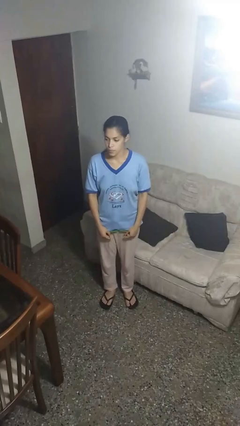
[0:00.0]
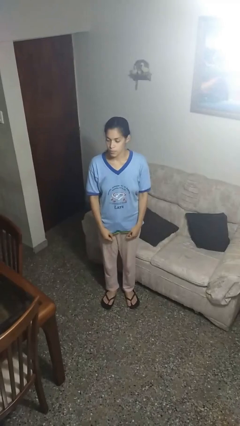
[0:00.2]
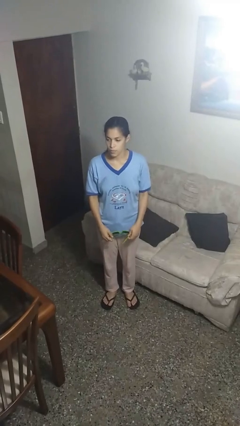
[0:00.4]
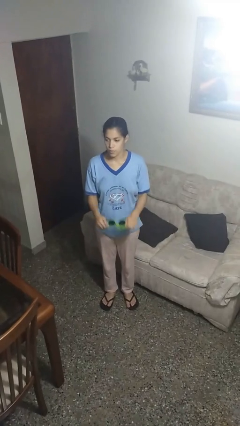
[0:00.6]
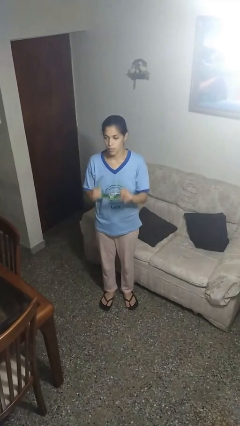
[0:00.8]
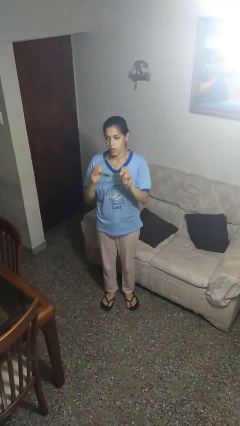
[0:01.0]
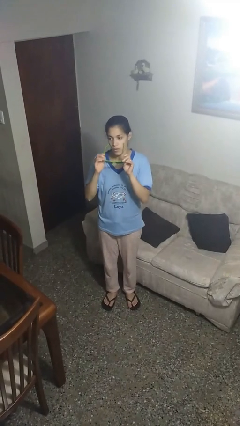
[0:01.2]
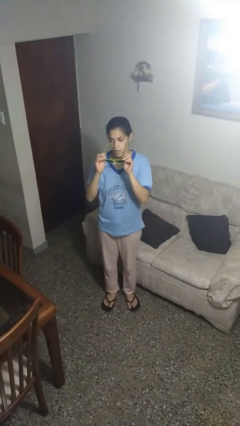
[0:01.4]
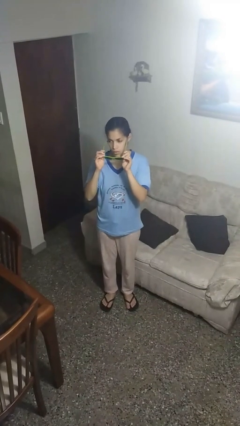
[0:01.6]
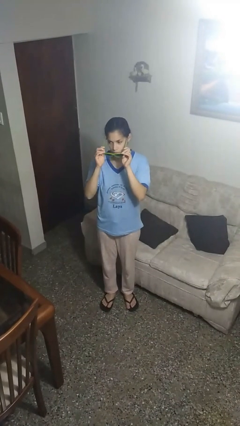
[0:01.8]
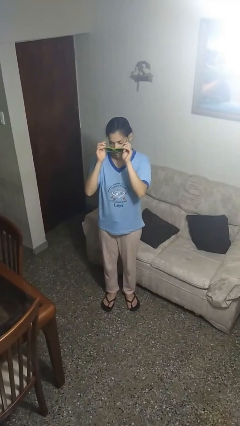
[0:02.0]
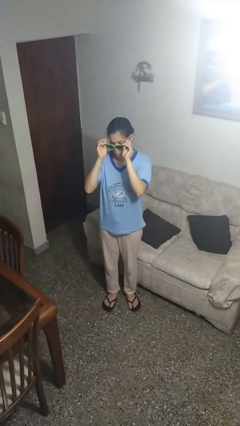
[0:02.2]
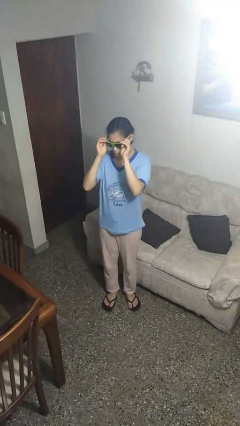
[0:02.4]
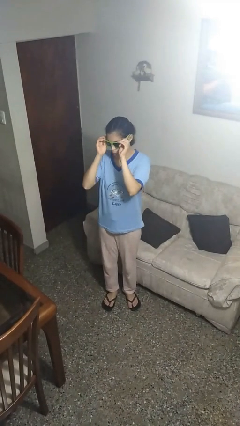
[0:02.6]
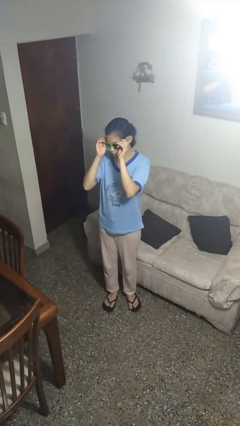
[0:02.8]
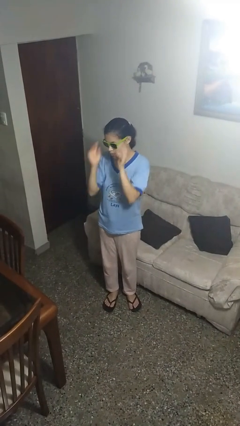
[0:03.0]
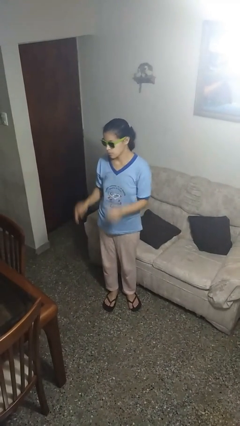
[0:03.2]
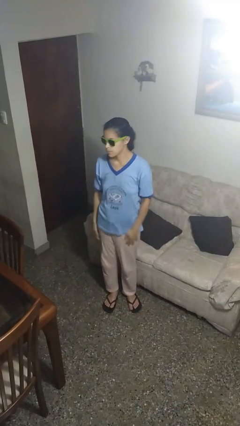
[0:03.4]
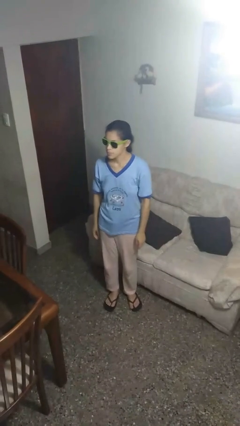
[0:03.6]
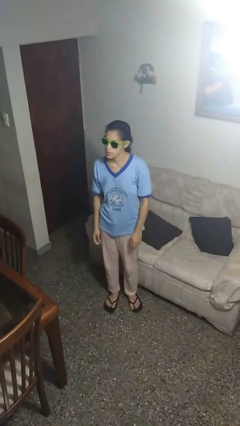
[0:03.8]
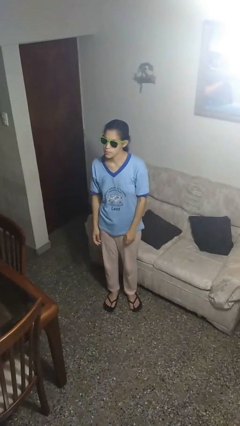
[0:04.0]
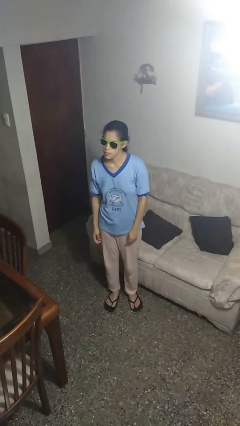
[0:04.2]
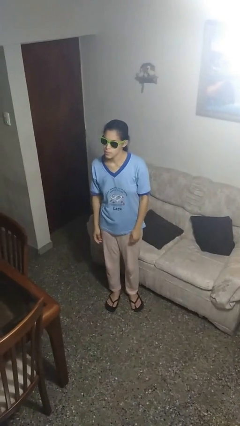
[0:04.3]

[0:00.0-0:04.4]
person puts on sunglasses

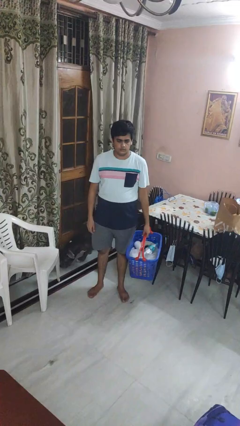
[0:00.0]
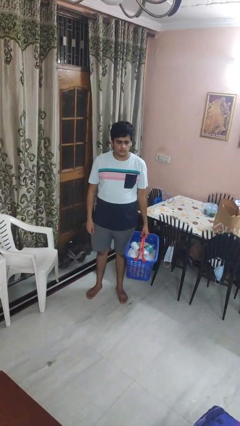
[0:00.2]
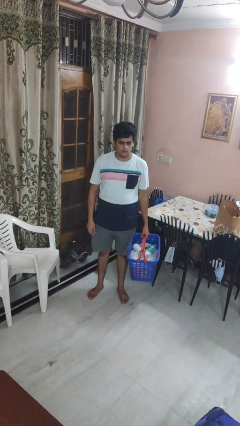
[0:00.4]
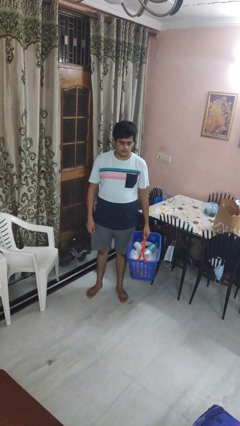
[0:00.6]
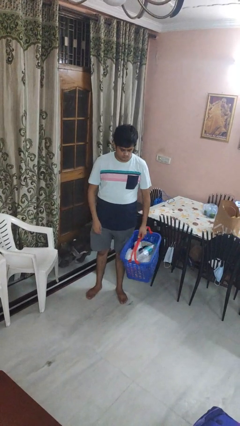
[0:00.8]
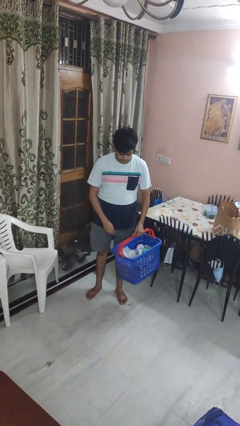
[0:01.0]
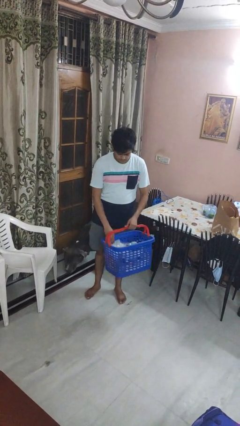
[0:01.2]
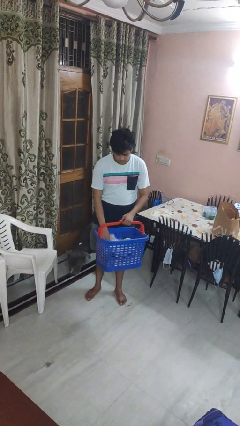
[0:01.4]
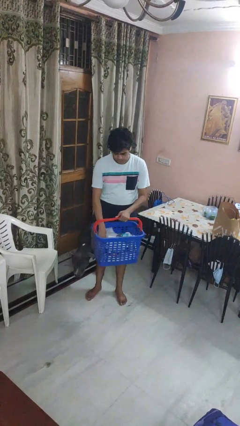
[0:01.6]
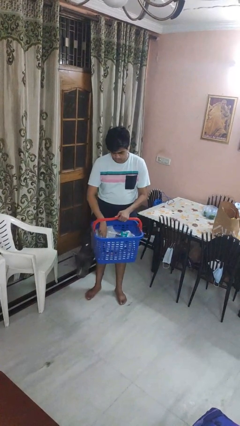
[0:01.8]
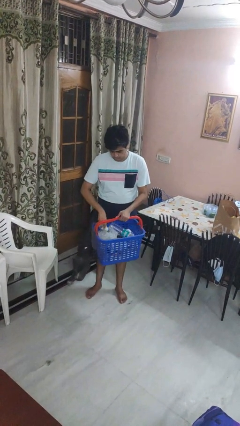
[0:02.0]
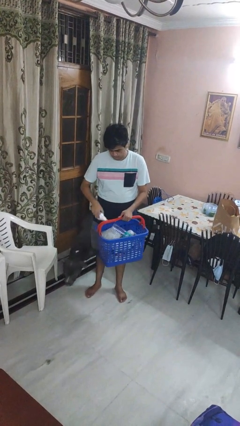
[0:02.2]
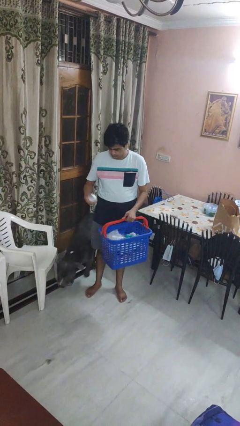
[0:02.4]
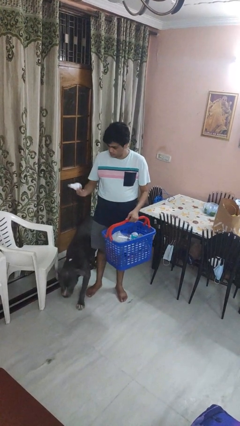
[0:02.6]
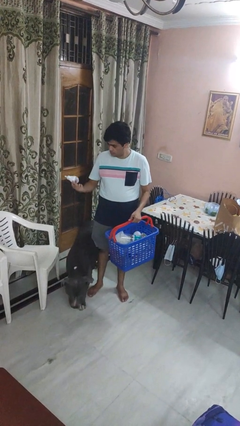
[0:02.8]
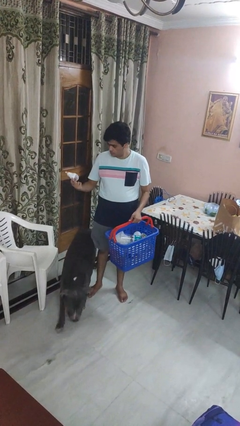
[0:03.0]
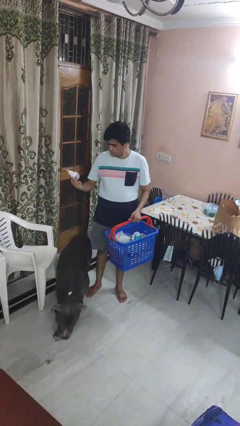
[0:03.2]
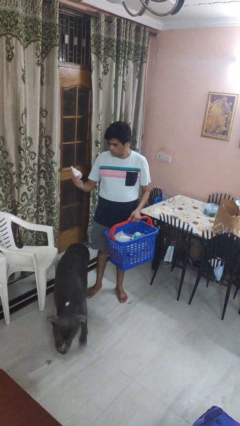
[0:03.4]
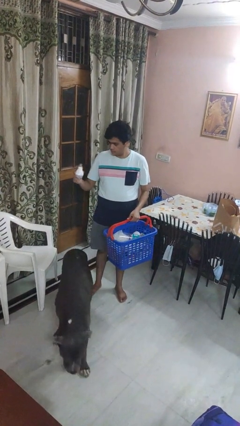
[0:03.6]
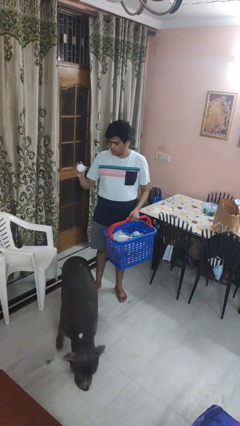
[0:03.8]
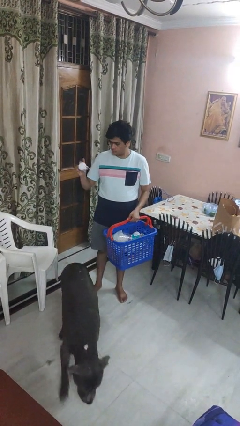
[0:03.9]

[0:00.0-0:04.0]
person takes object from basket

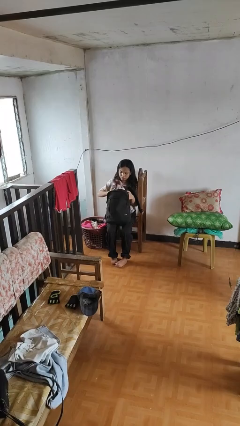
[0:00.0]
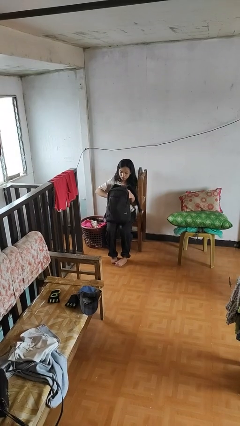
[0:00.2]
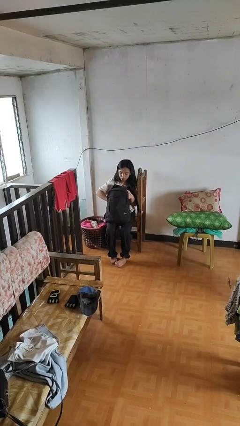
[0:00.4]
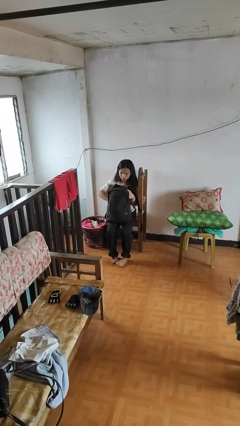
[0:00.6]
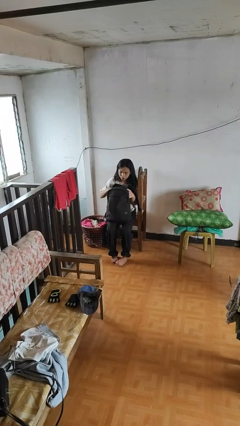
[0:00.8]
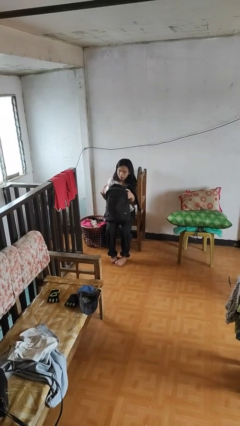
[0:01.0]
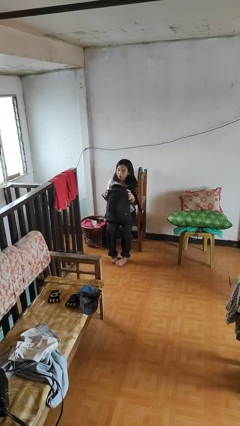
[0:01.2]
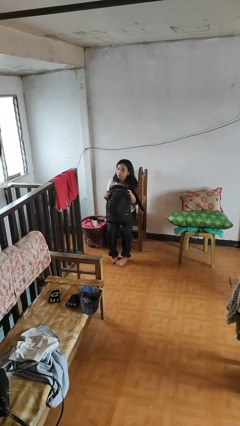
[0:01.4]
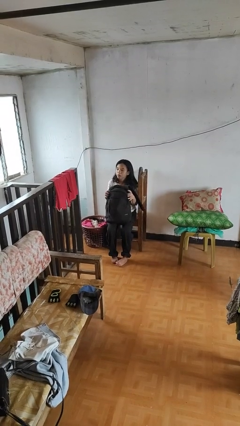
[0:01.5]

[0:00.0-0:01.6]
person puts object into backpack

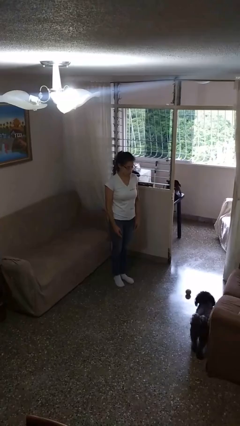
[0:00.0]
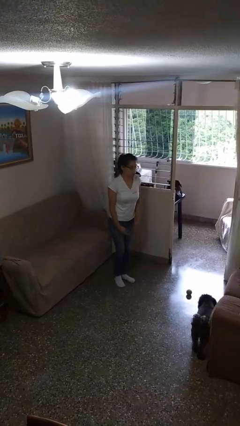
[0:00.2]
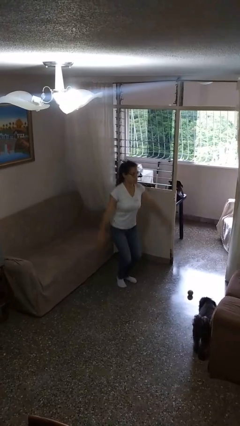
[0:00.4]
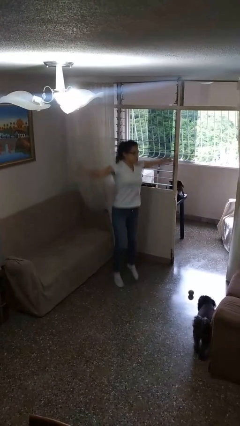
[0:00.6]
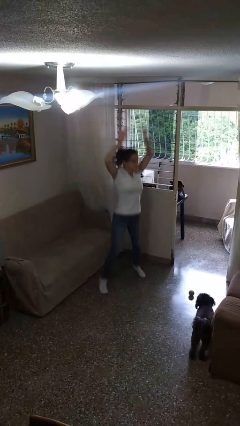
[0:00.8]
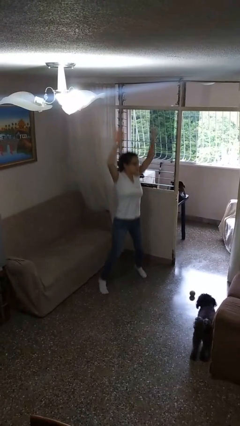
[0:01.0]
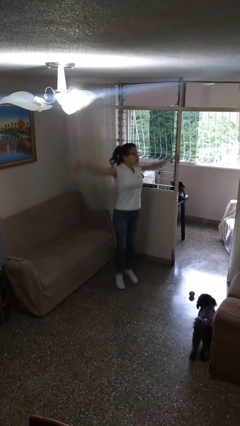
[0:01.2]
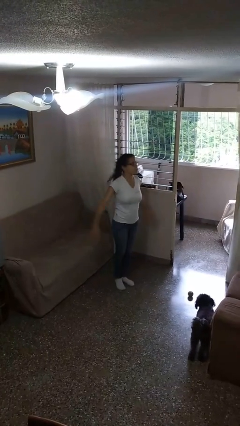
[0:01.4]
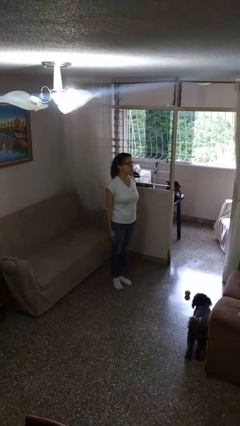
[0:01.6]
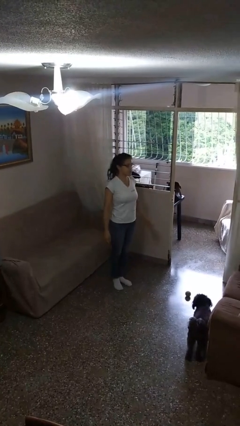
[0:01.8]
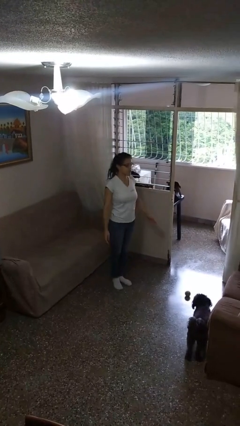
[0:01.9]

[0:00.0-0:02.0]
person exercises with jumping jacks

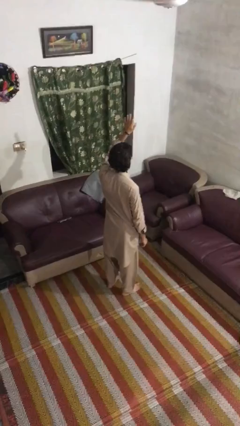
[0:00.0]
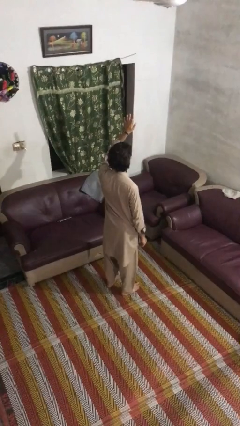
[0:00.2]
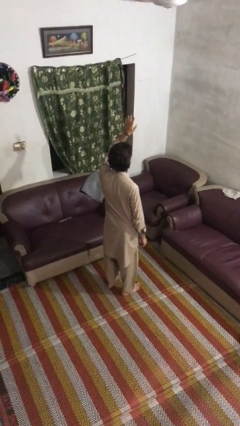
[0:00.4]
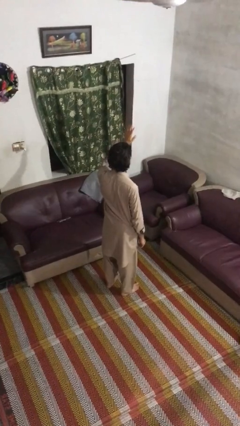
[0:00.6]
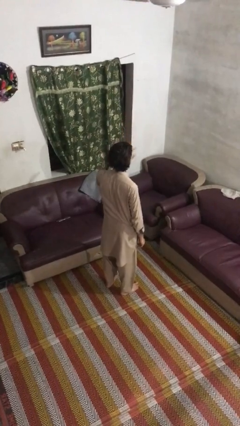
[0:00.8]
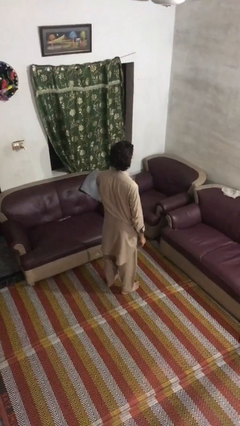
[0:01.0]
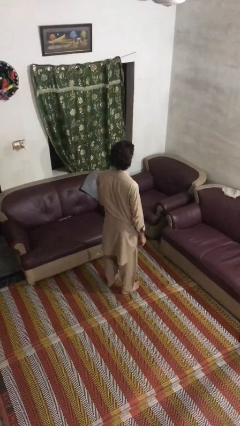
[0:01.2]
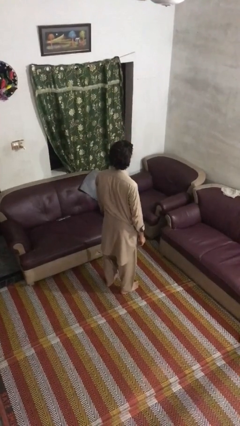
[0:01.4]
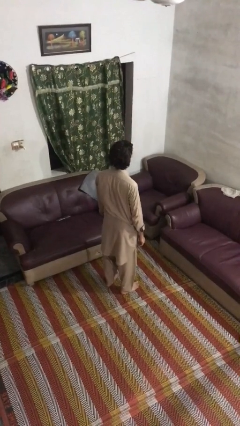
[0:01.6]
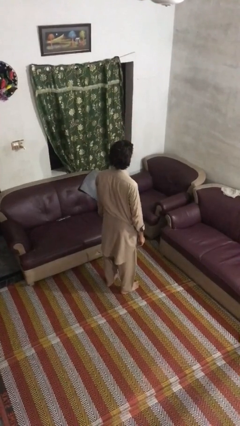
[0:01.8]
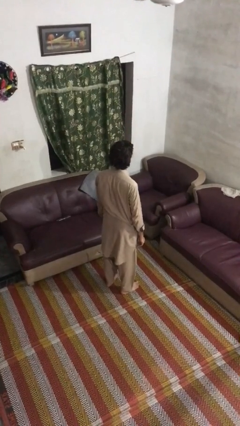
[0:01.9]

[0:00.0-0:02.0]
person gestures lower hand

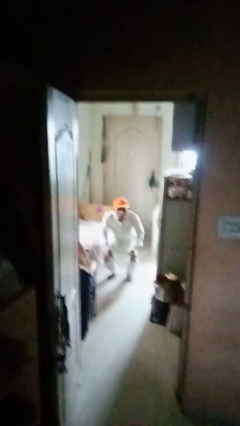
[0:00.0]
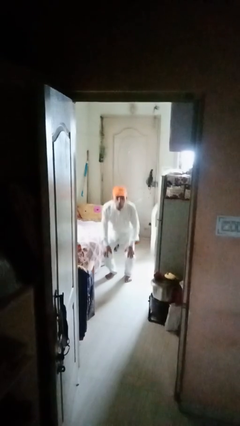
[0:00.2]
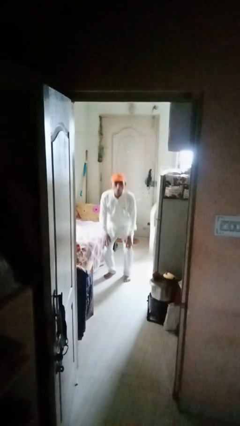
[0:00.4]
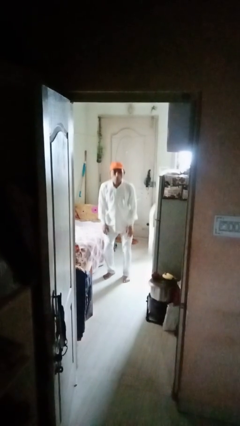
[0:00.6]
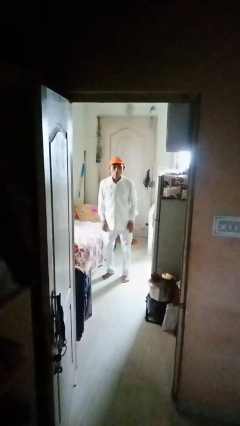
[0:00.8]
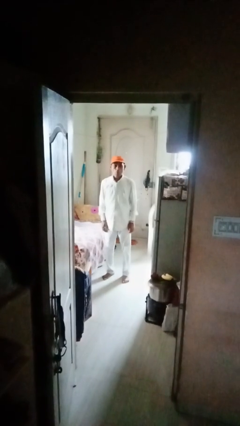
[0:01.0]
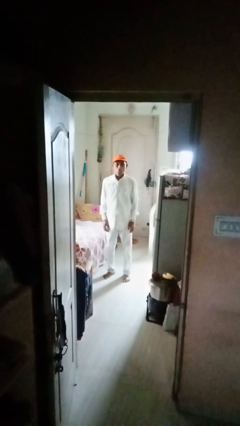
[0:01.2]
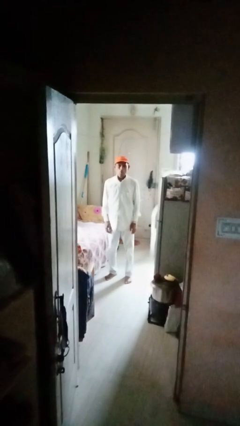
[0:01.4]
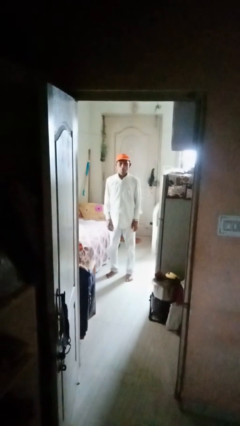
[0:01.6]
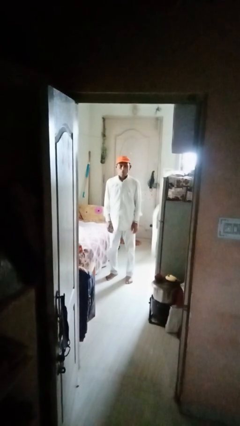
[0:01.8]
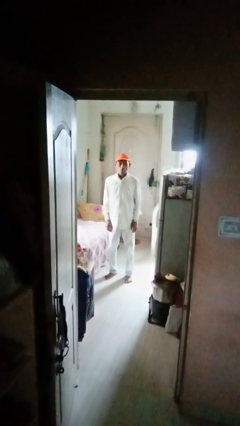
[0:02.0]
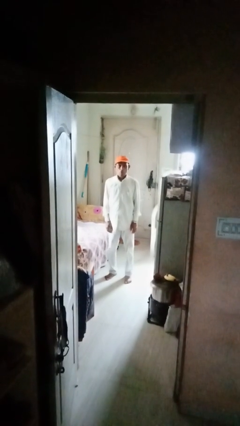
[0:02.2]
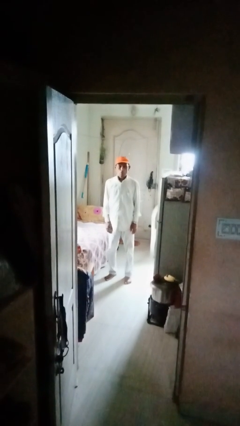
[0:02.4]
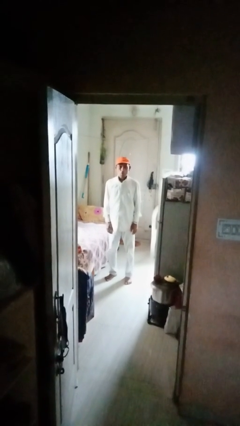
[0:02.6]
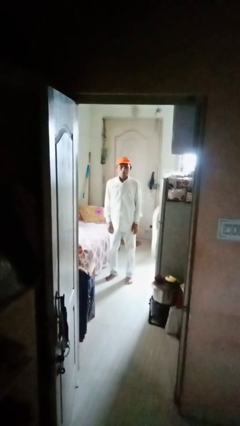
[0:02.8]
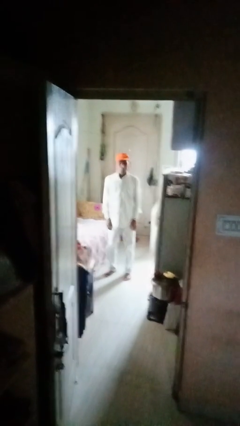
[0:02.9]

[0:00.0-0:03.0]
person stands up

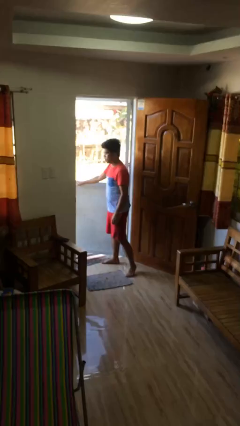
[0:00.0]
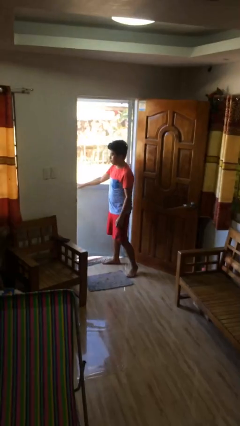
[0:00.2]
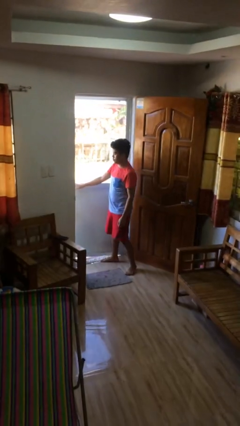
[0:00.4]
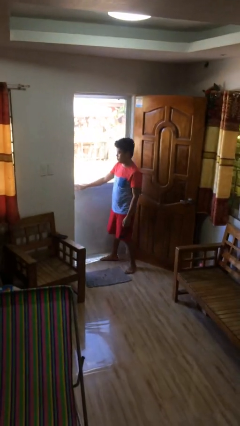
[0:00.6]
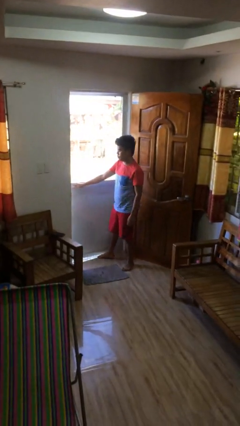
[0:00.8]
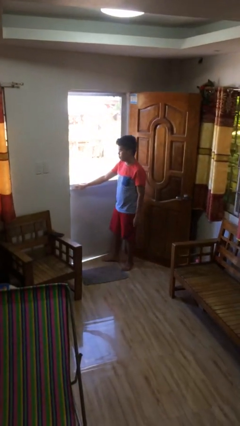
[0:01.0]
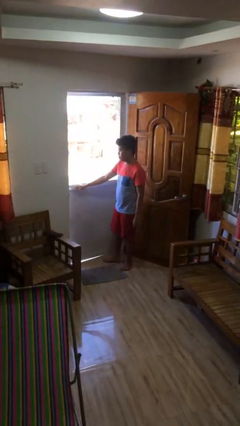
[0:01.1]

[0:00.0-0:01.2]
person closes facility door
